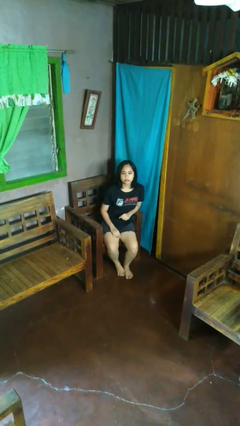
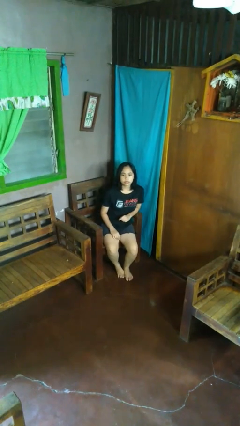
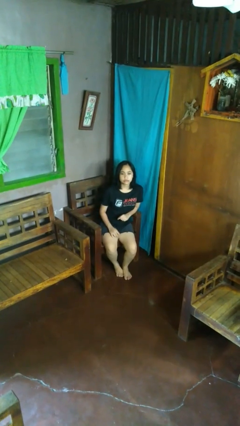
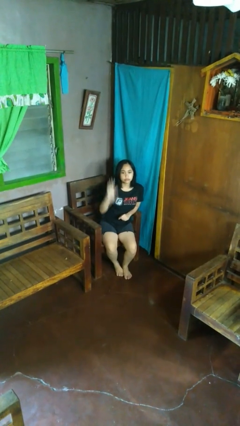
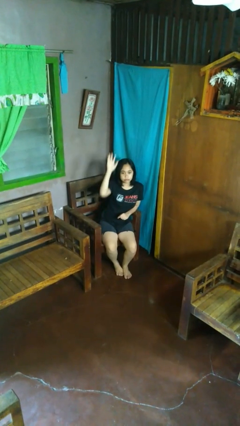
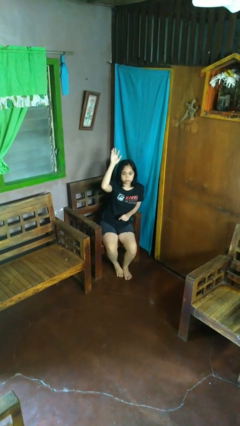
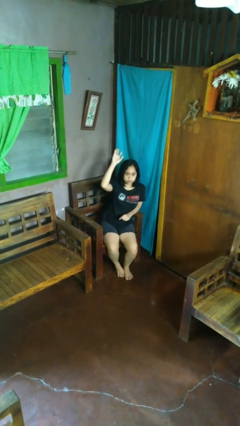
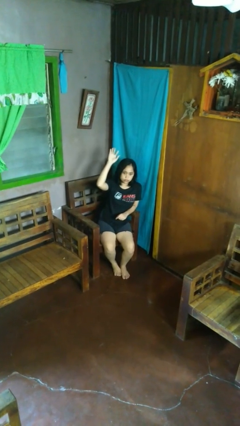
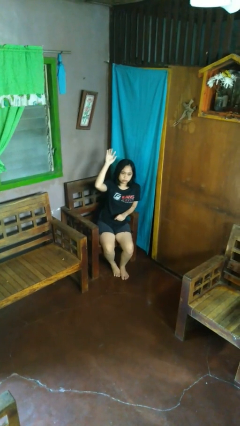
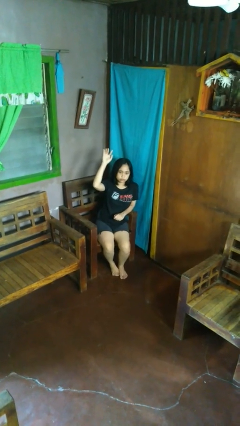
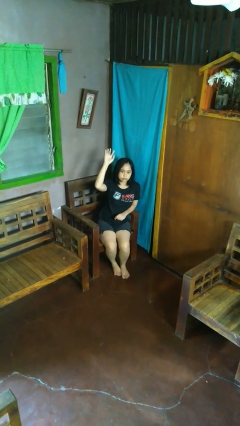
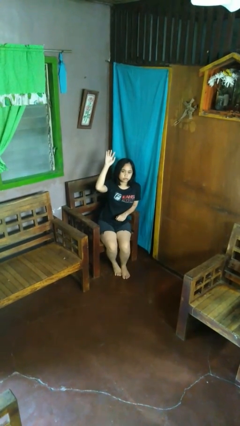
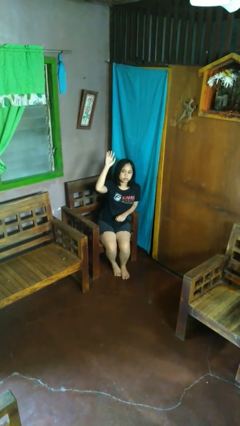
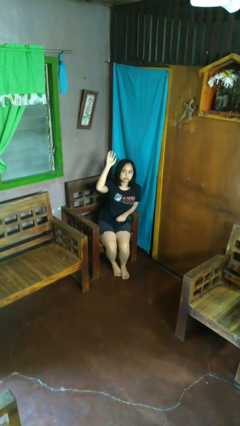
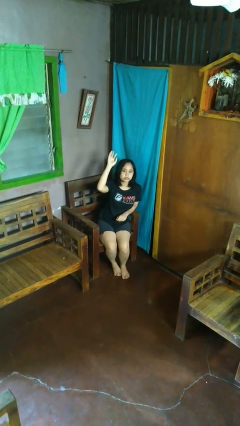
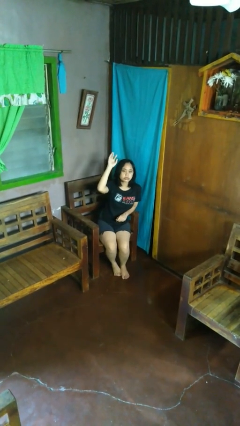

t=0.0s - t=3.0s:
person gestures raise hand

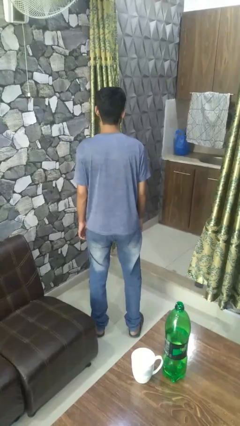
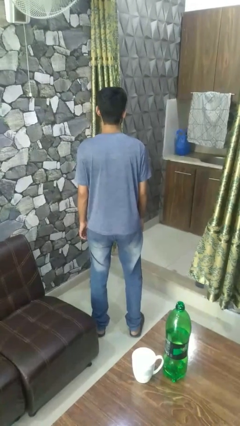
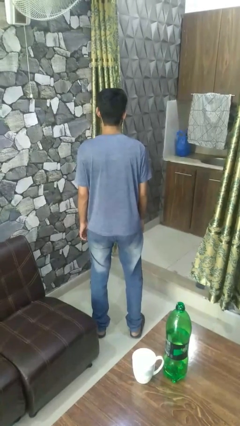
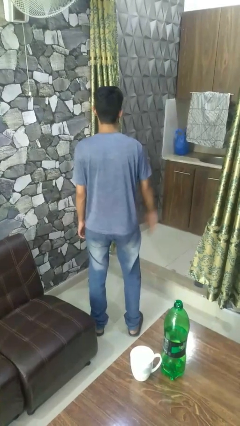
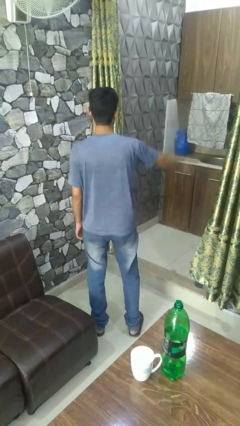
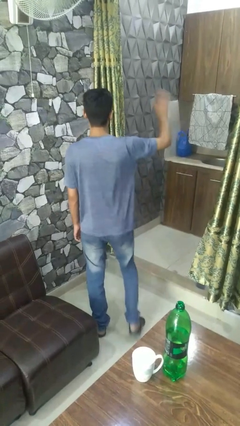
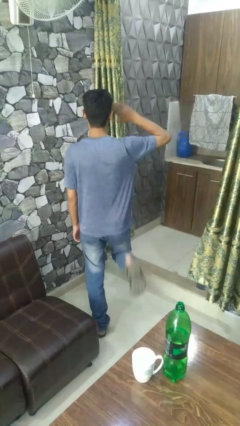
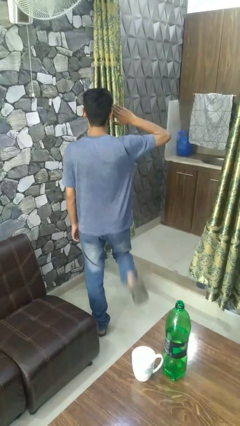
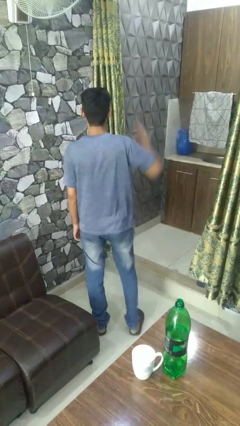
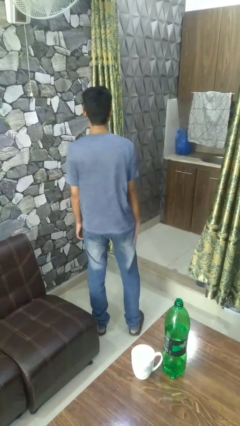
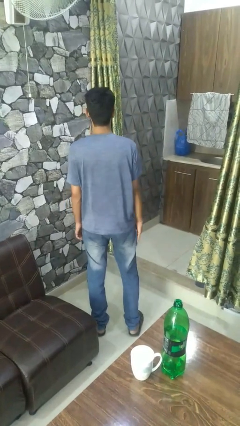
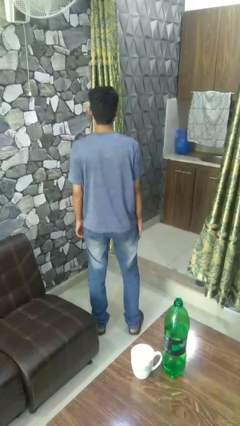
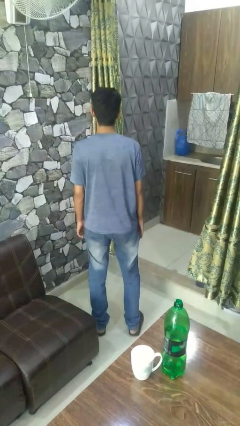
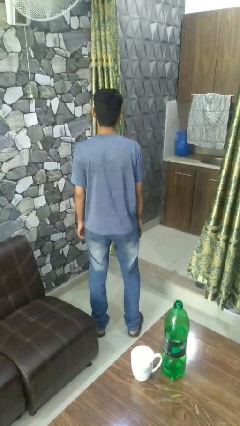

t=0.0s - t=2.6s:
person salutes

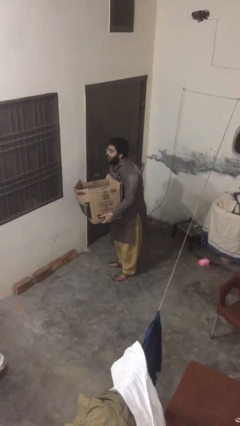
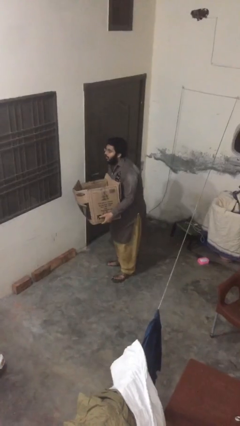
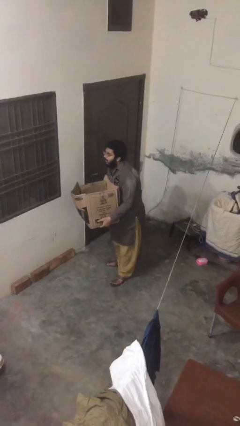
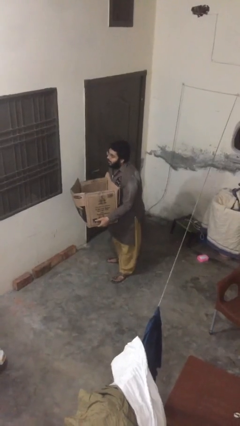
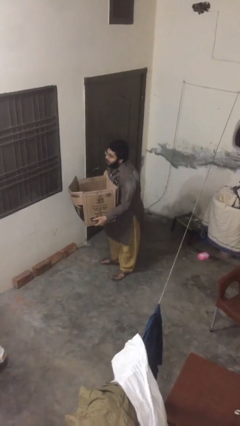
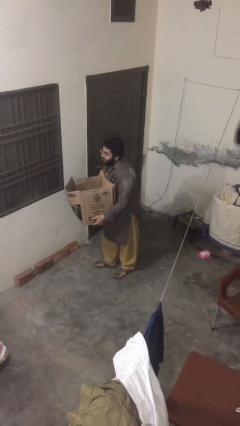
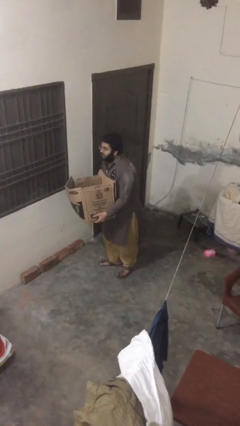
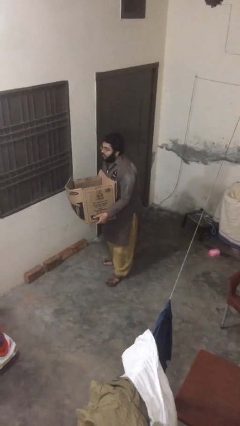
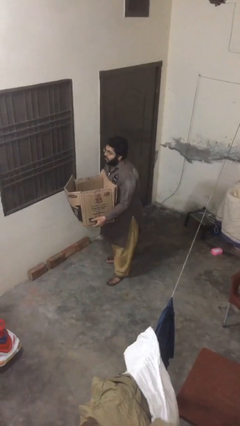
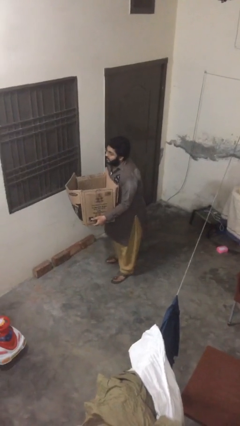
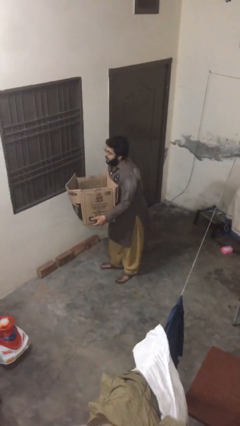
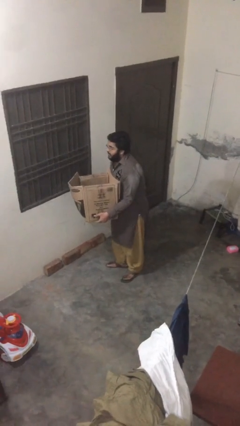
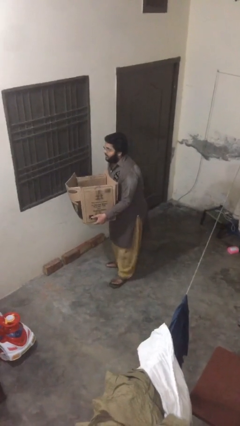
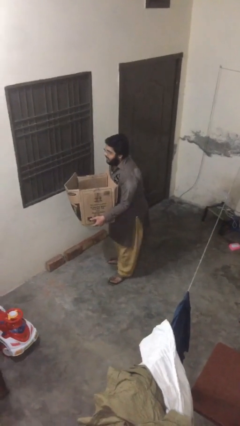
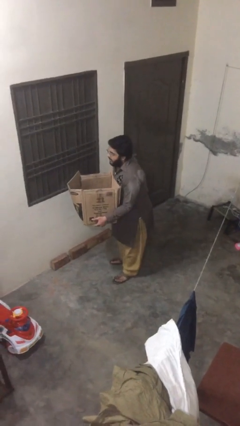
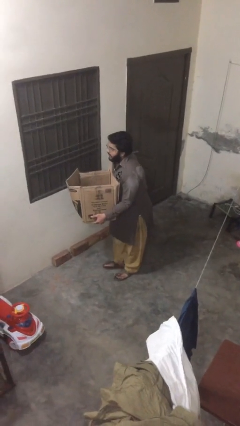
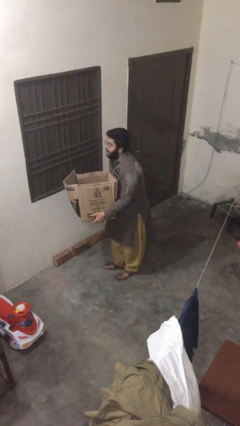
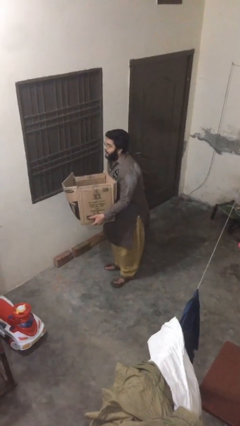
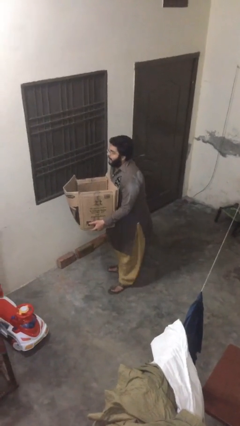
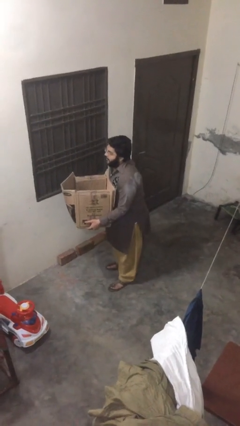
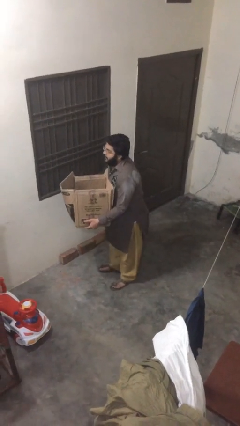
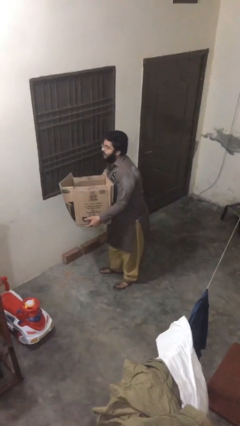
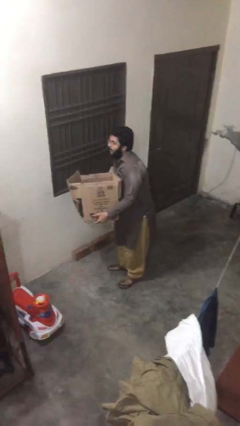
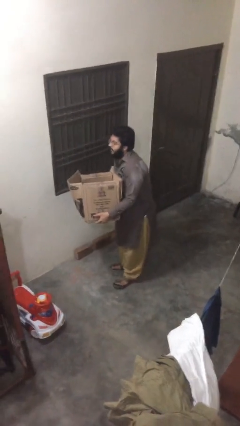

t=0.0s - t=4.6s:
person carries heavy object

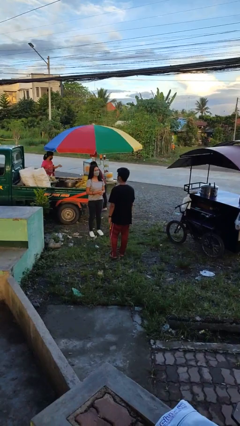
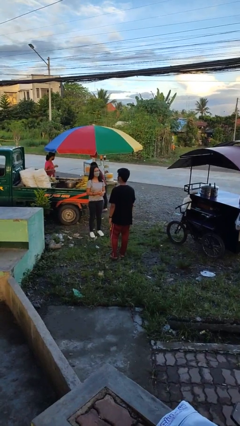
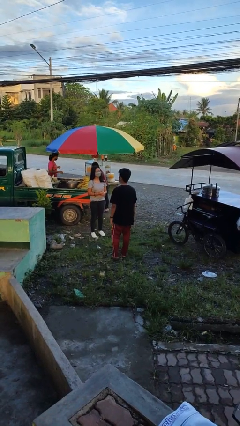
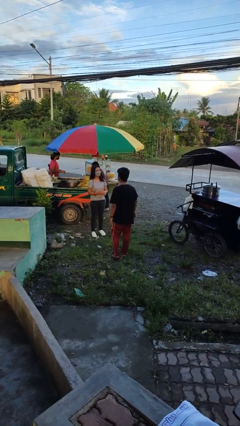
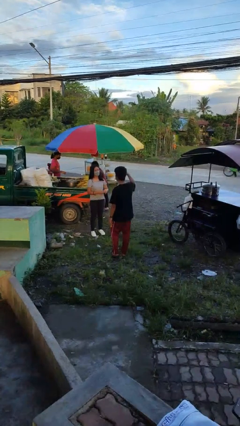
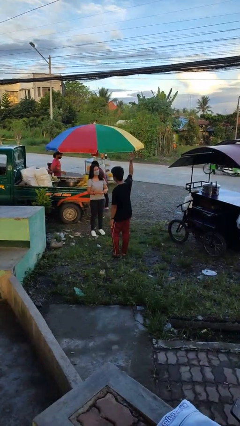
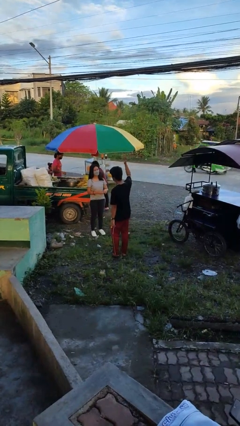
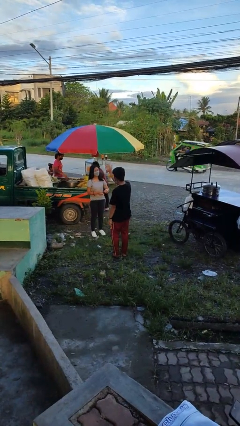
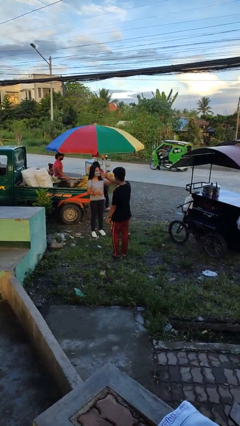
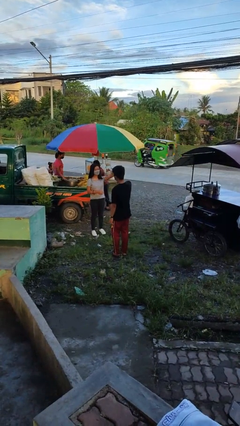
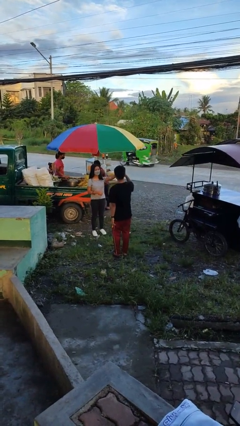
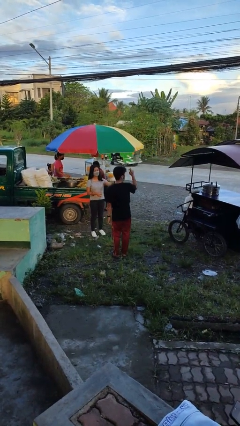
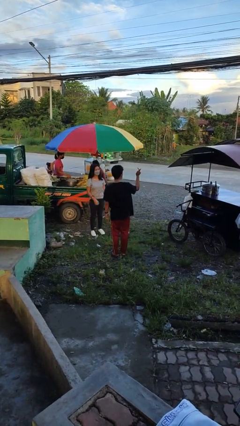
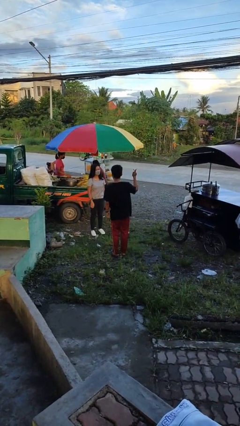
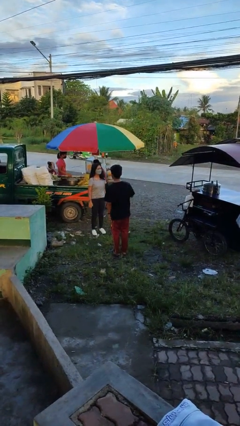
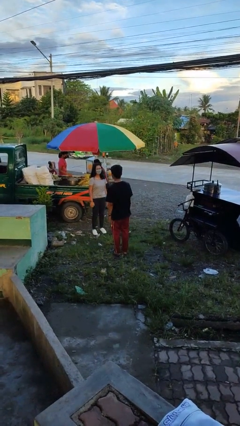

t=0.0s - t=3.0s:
person talks to person

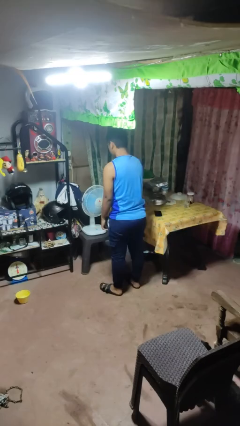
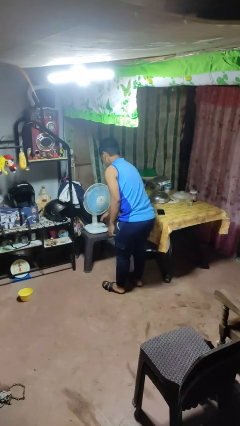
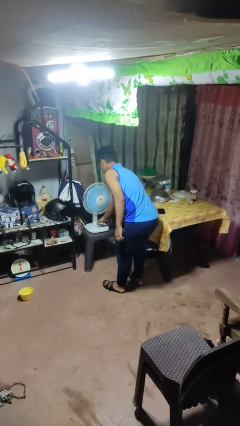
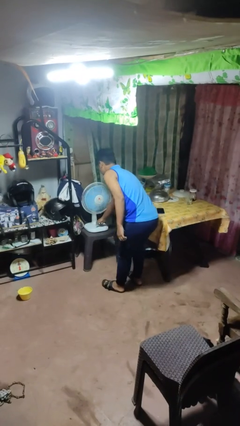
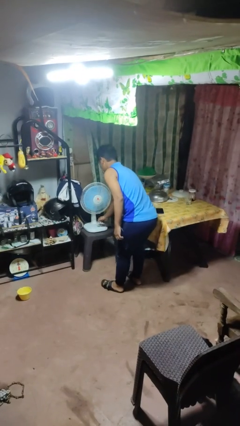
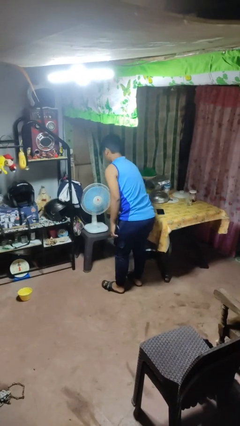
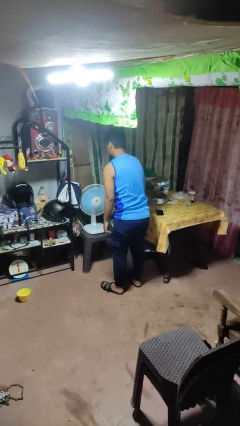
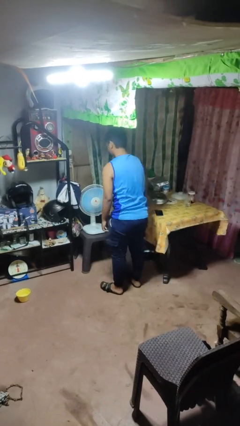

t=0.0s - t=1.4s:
person turns off fan

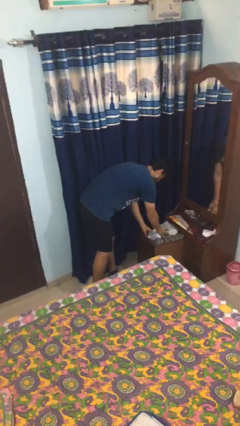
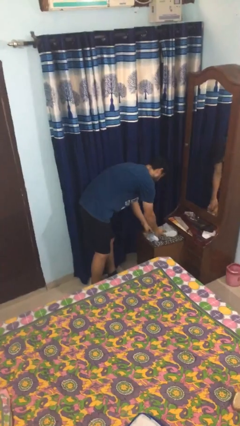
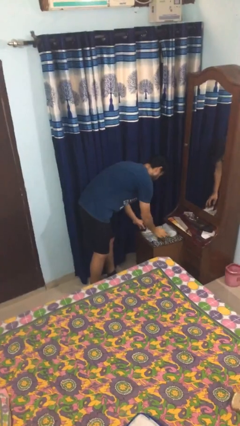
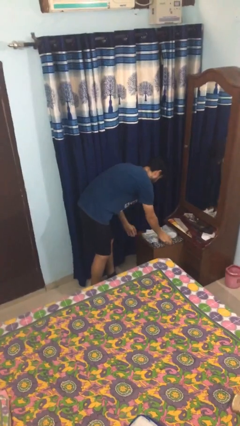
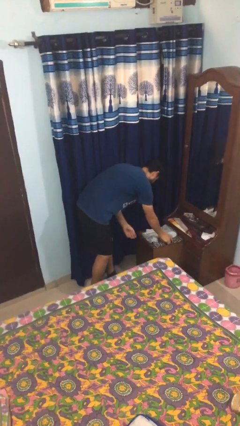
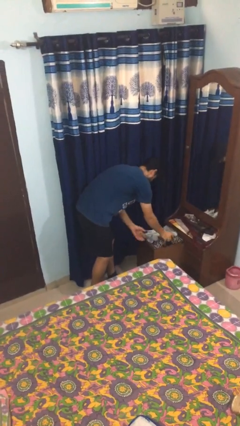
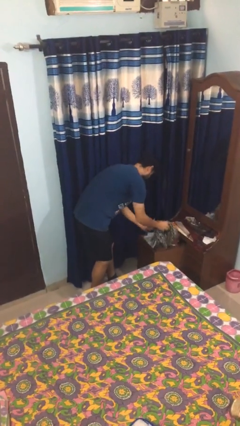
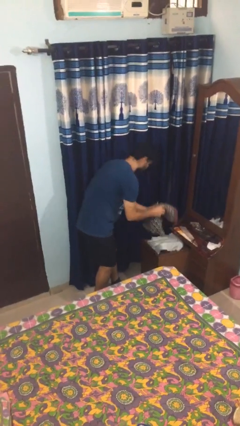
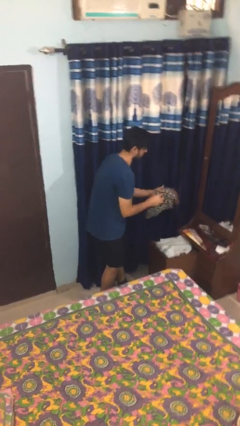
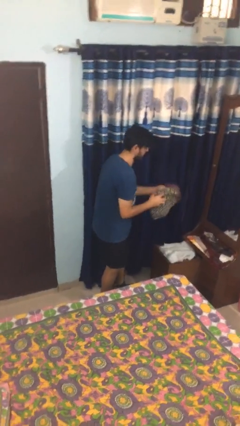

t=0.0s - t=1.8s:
person takes clothes from dresser

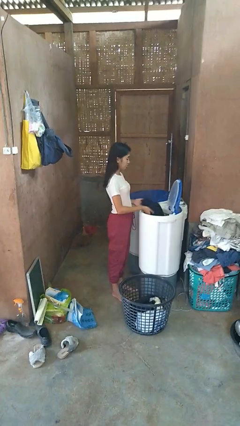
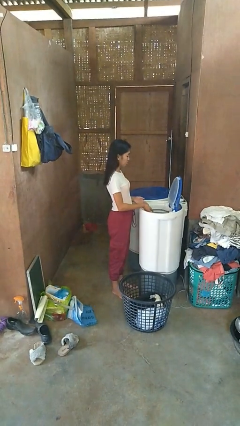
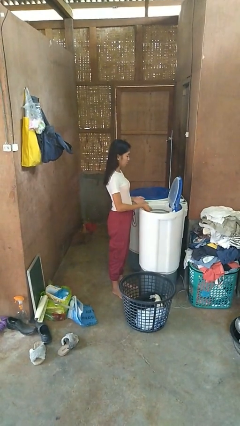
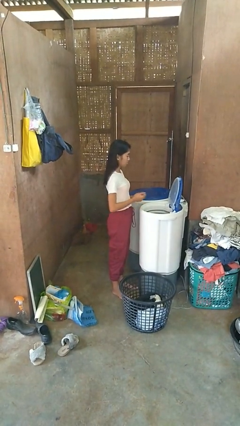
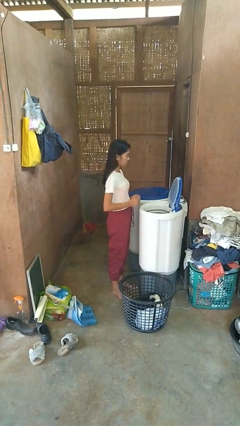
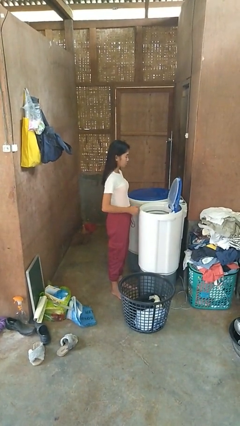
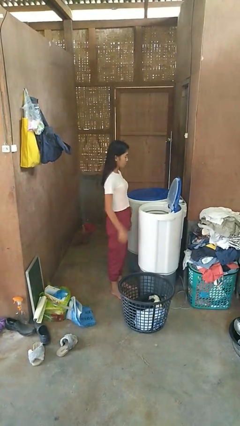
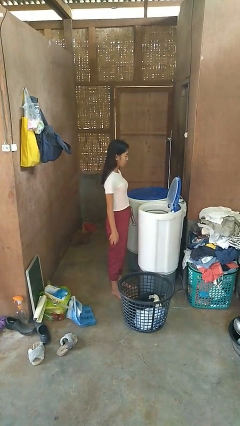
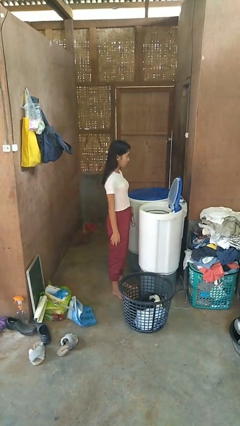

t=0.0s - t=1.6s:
person loads dryer
